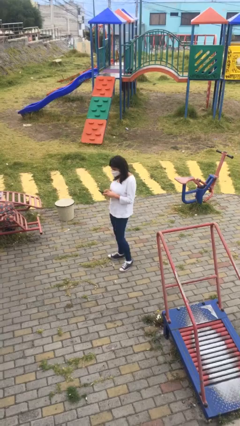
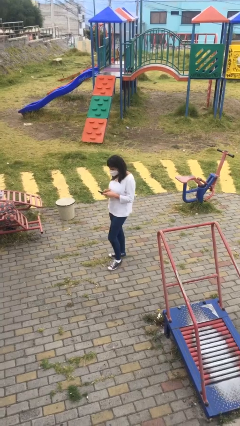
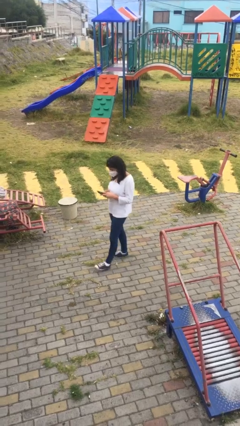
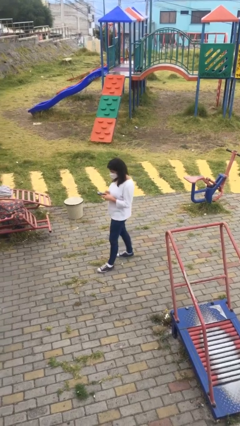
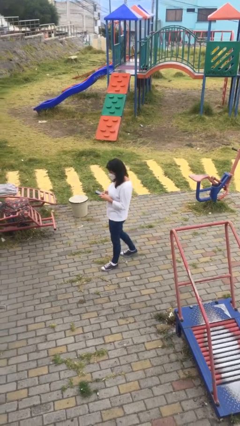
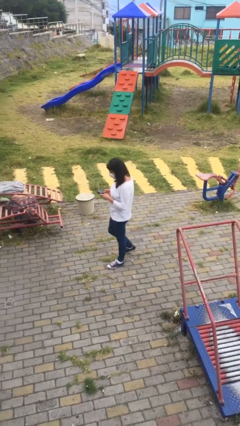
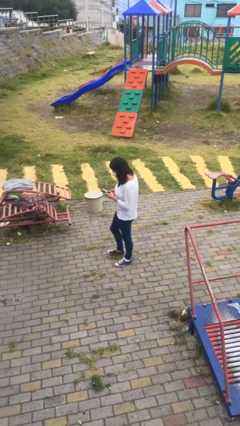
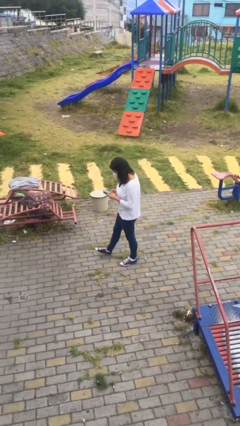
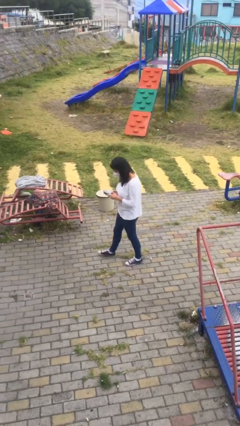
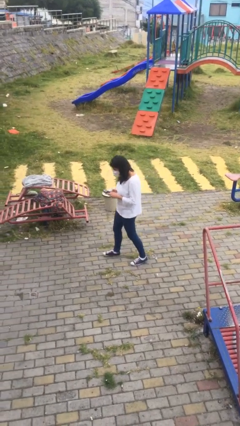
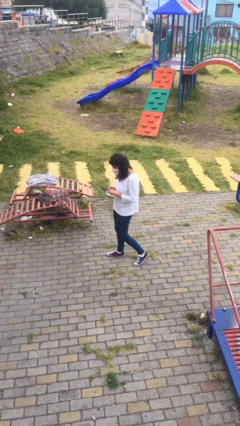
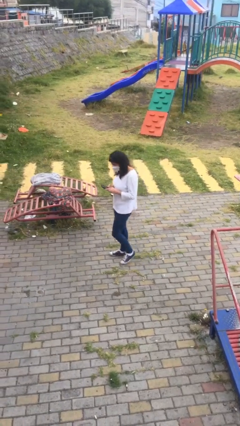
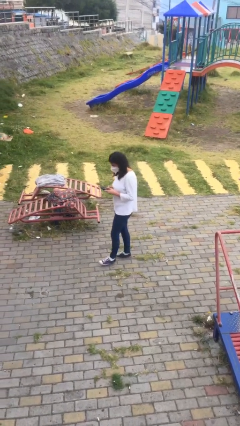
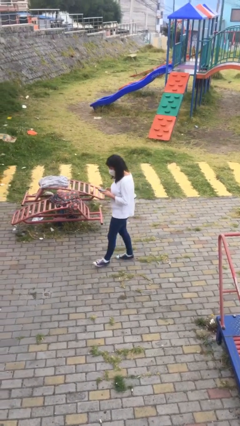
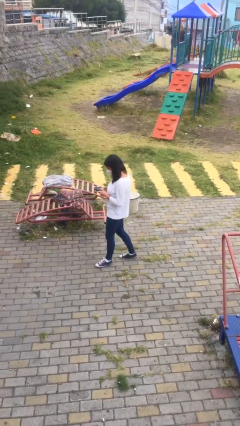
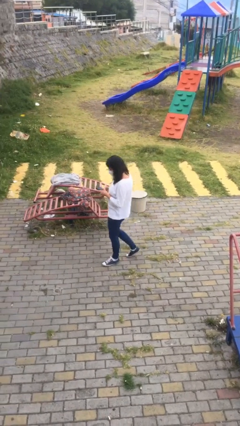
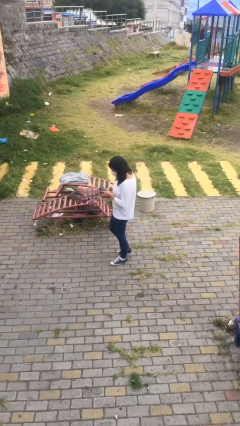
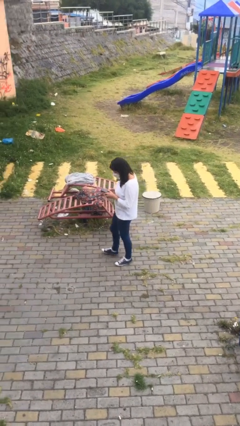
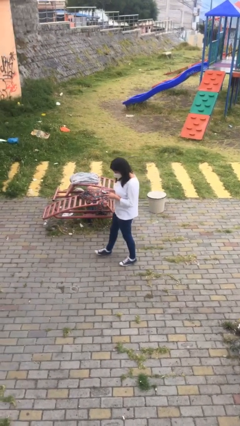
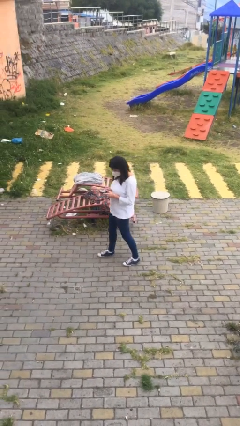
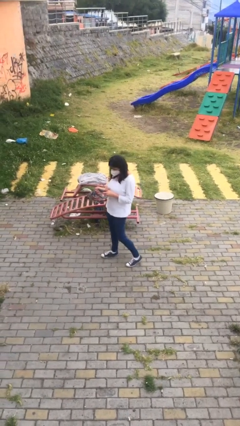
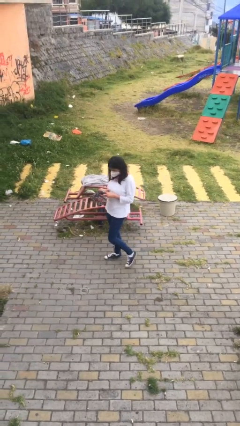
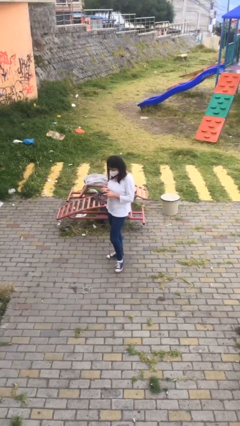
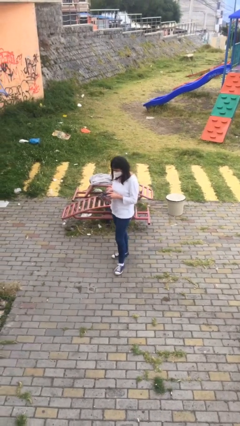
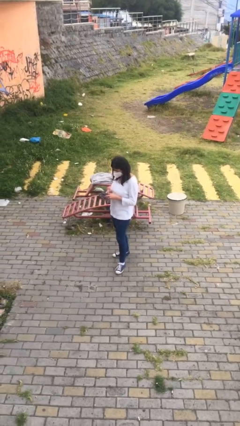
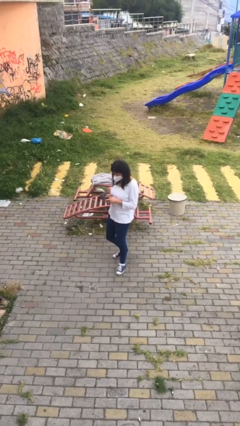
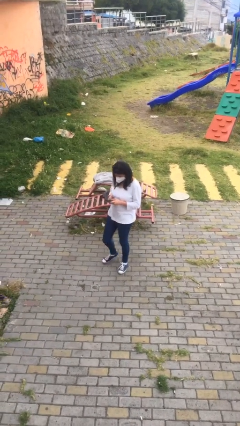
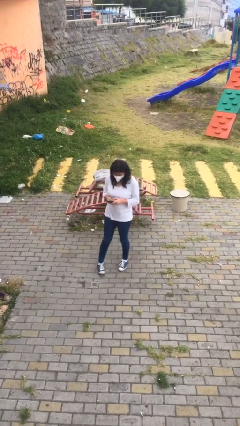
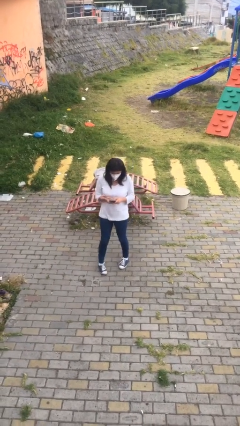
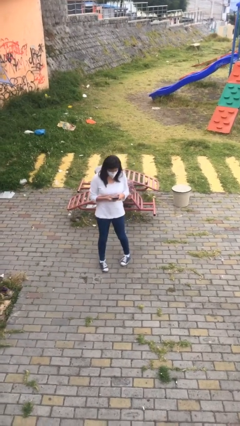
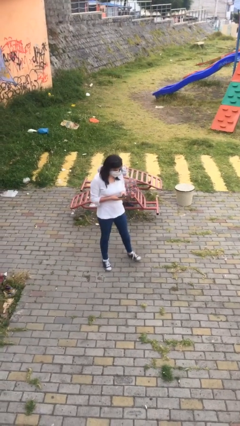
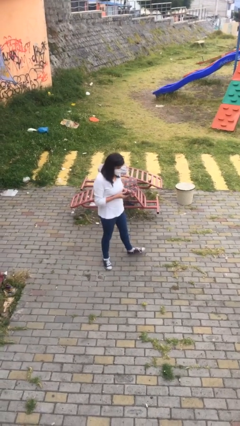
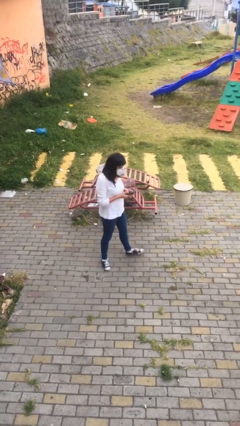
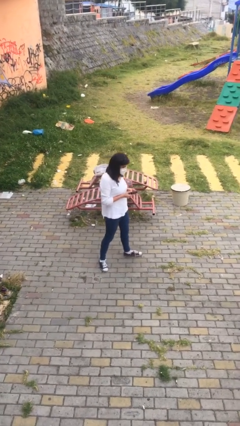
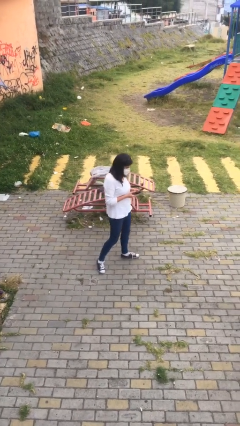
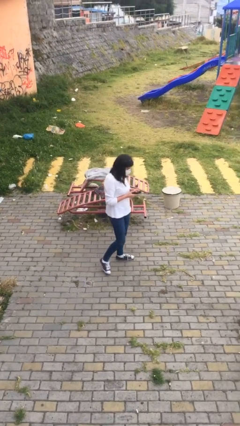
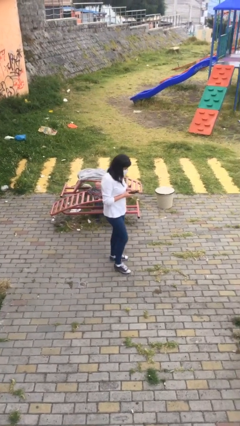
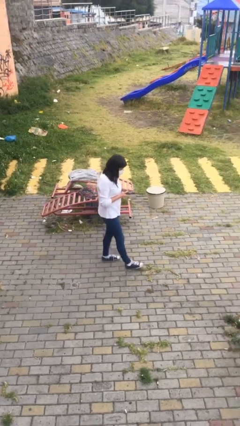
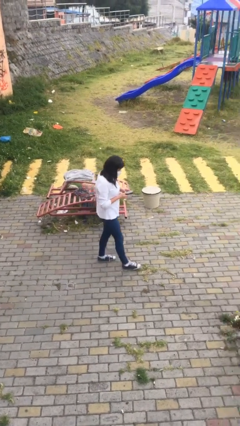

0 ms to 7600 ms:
person texts on phone

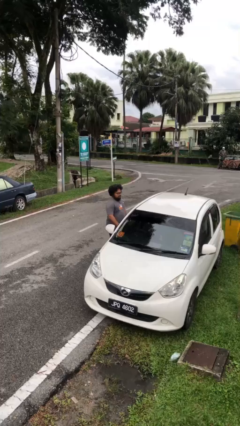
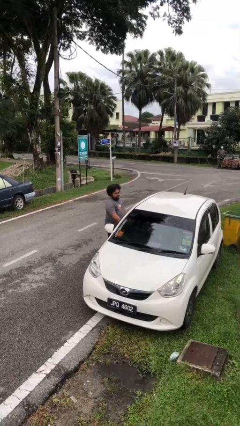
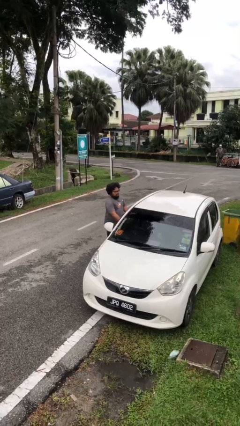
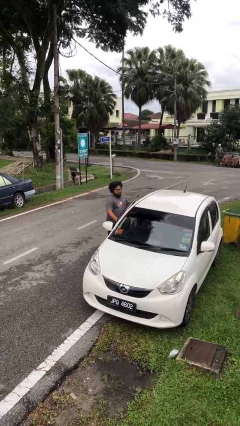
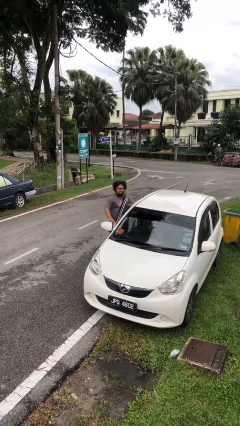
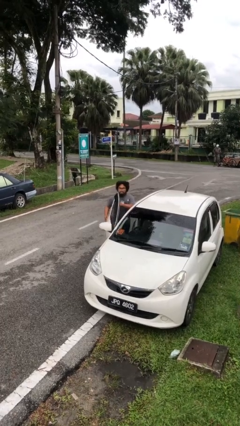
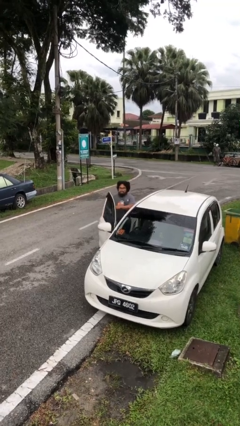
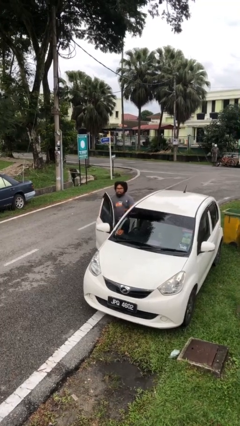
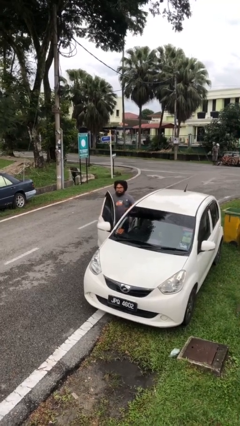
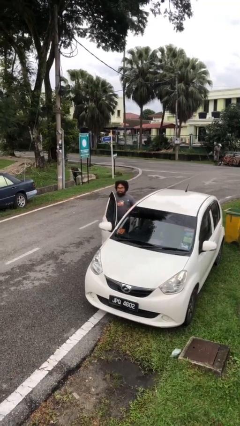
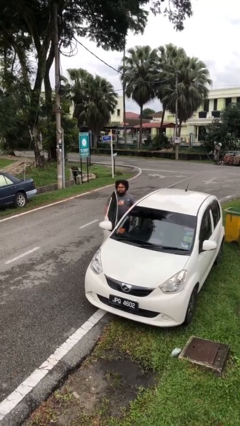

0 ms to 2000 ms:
person opens car door

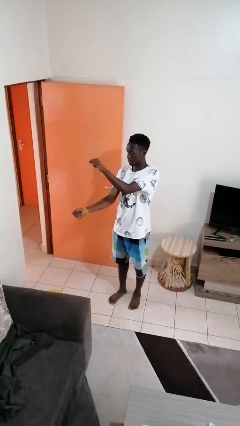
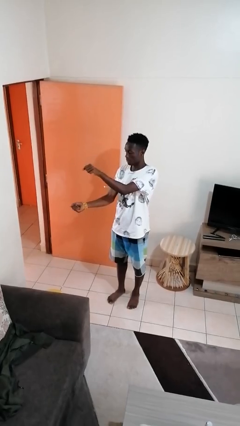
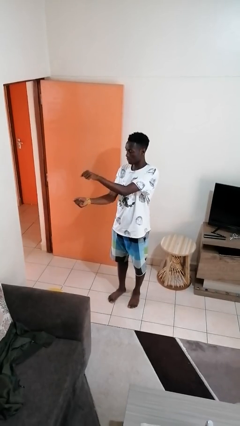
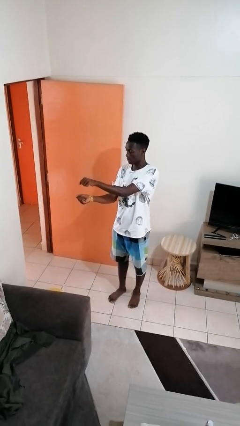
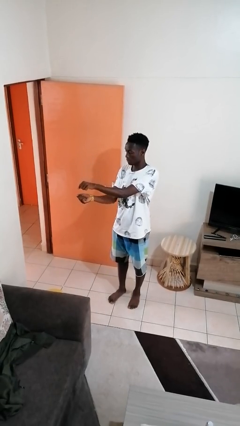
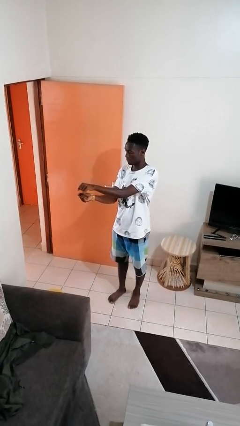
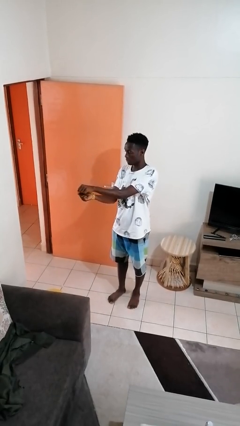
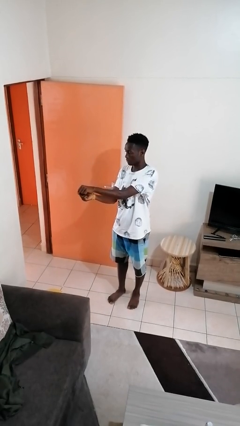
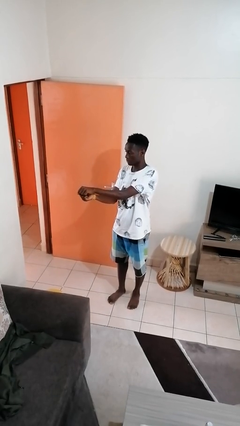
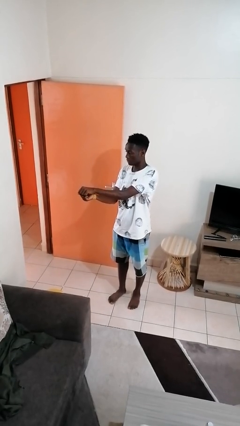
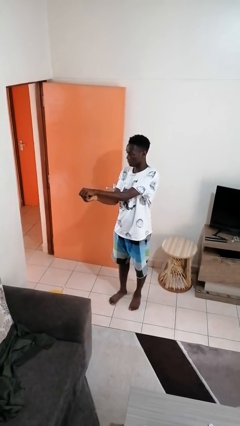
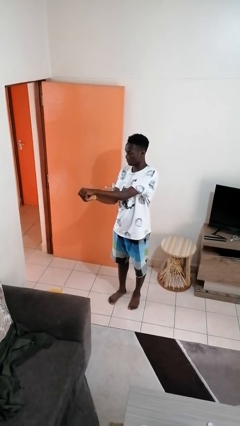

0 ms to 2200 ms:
person gestures zoom out

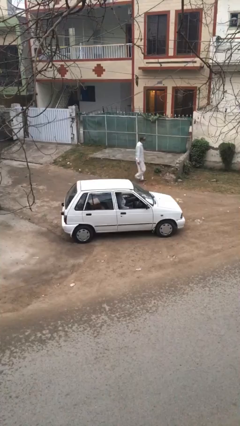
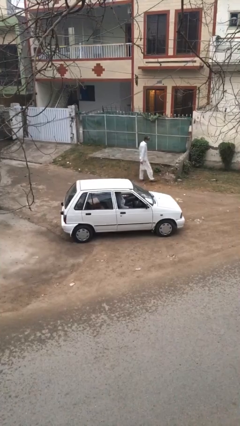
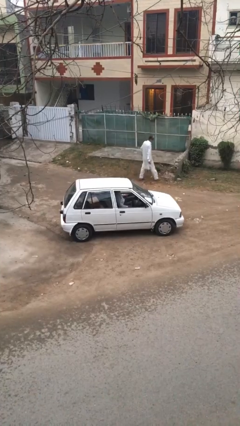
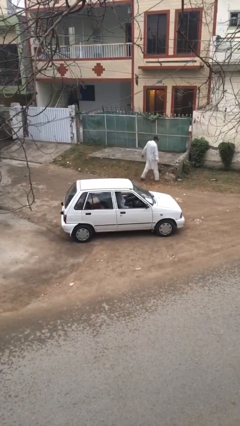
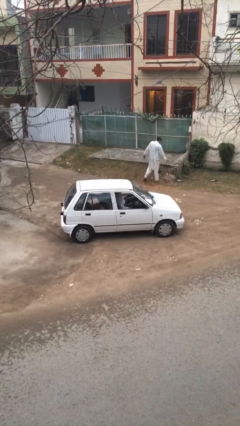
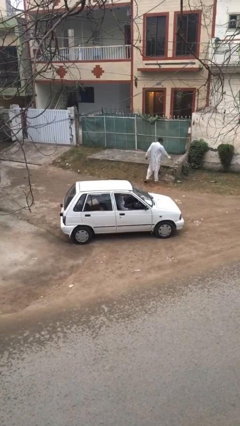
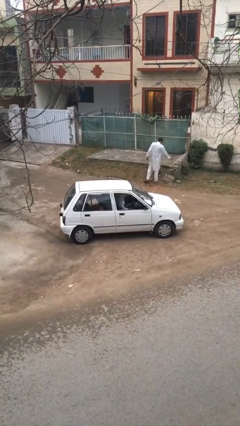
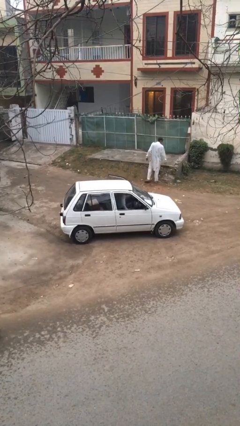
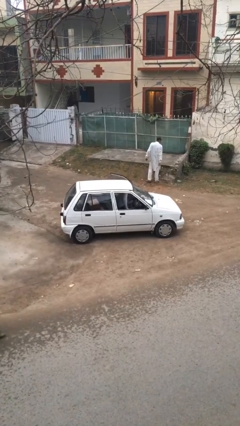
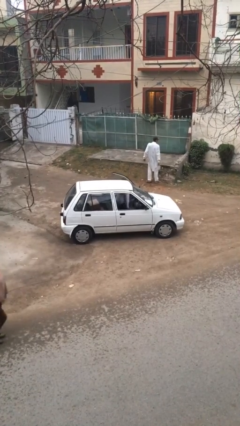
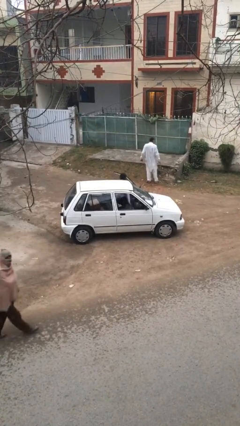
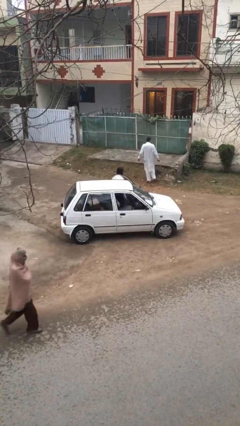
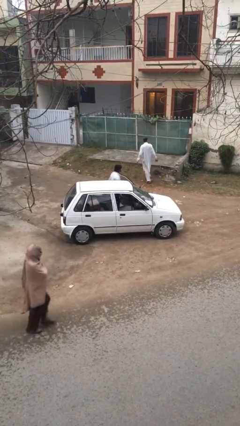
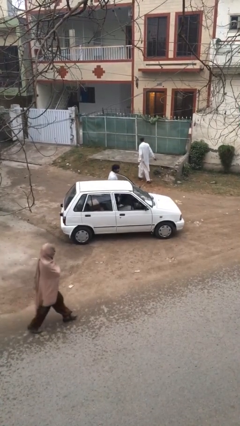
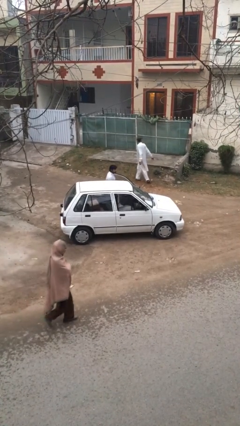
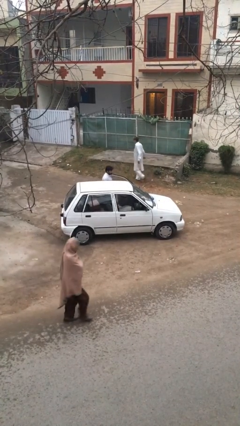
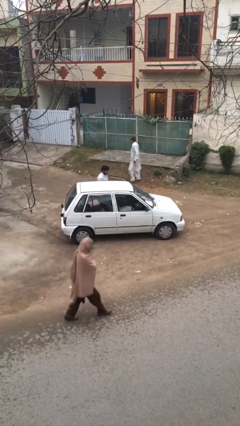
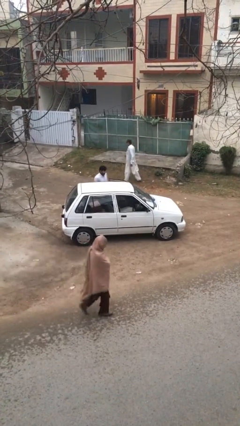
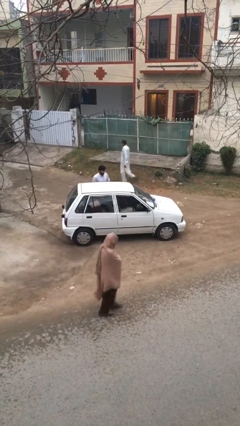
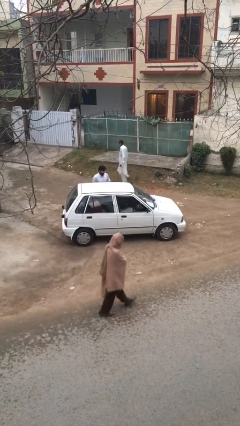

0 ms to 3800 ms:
car drops off person

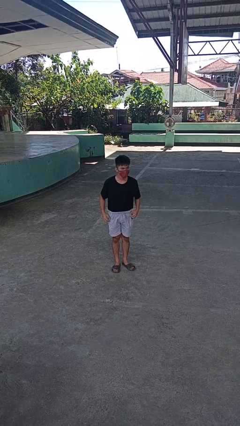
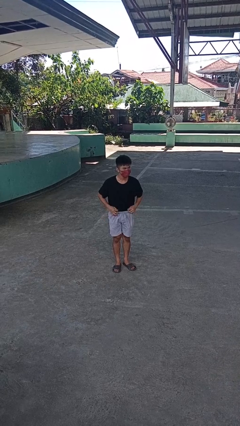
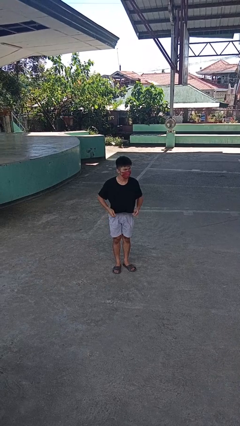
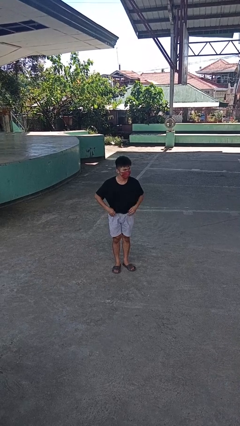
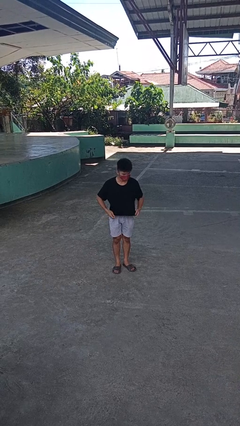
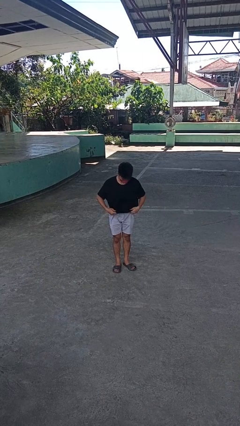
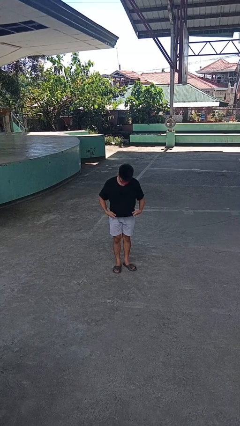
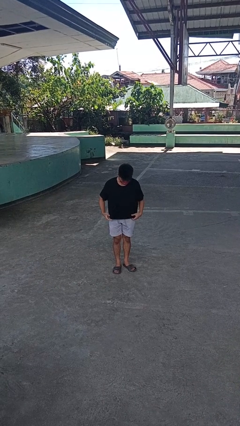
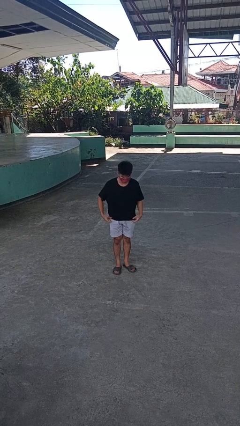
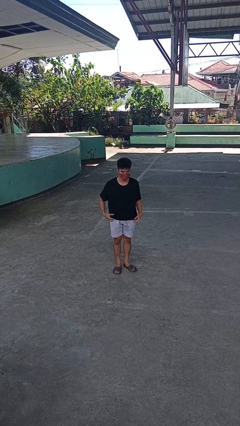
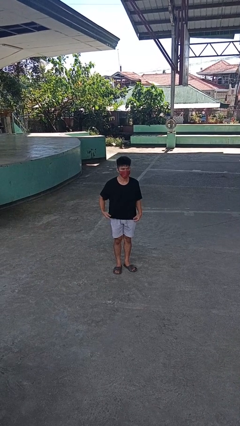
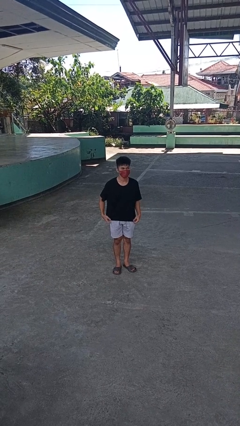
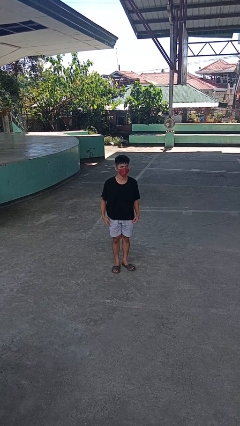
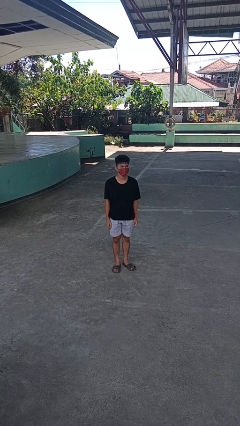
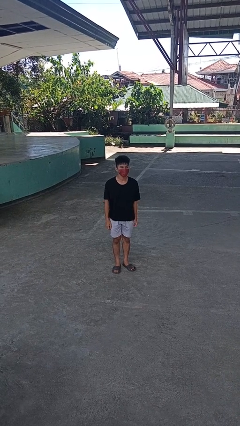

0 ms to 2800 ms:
person untucks shirt
